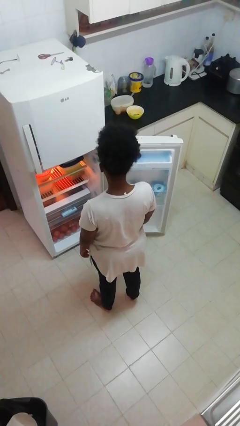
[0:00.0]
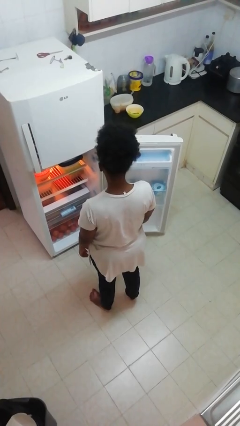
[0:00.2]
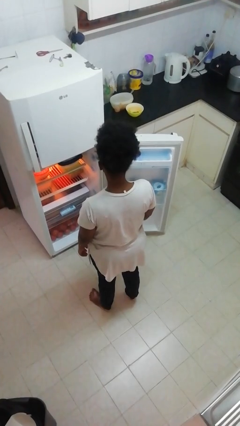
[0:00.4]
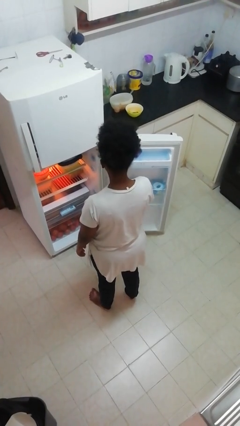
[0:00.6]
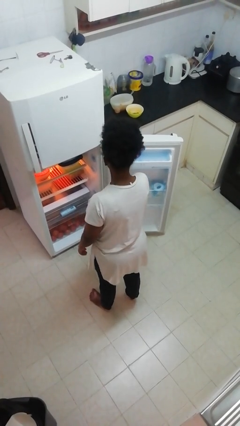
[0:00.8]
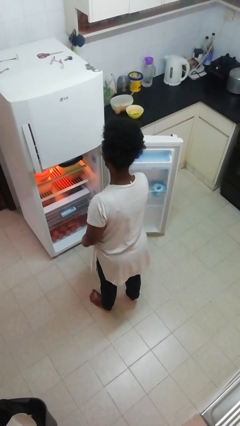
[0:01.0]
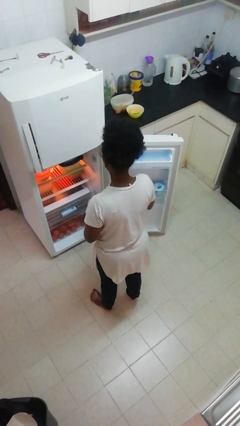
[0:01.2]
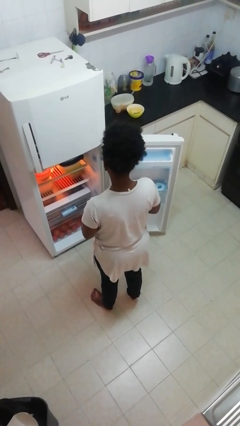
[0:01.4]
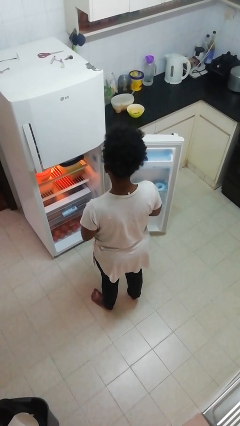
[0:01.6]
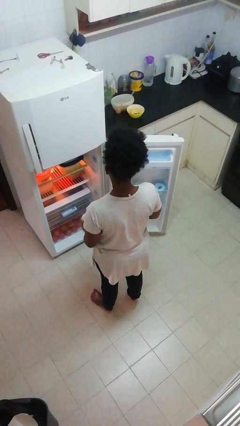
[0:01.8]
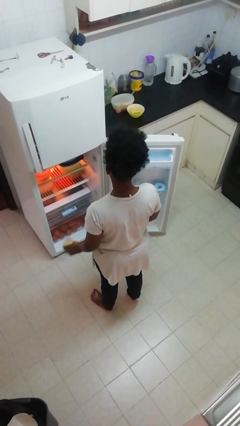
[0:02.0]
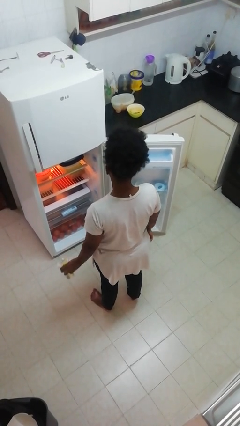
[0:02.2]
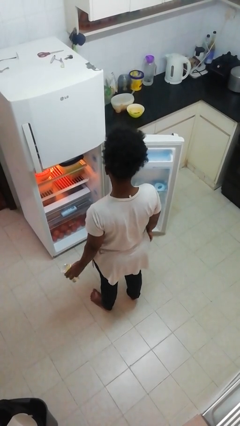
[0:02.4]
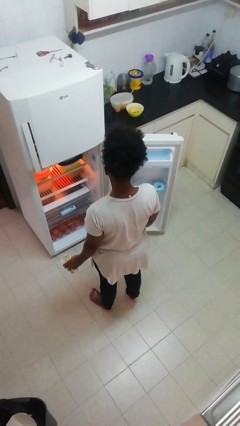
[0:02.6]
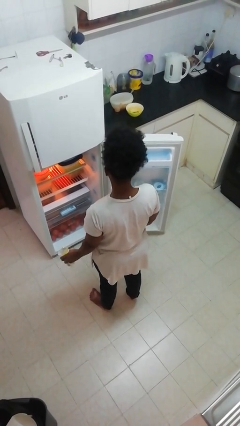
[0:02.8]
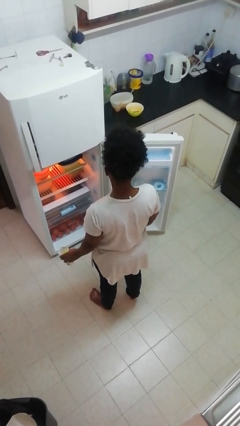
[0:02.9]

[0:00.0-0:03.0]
person takes object from refrigerator

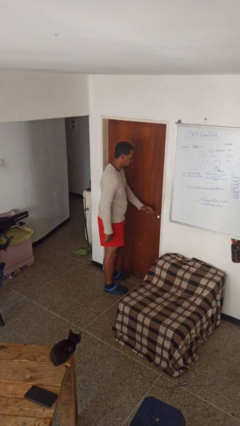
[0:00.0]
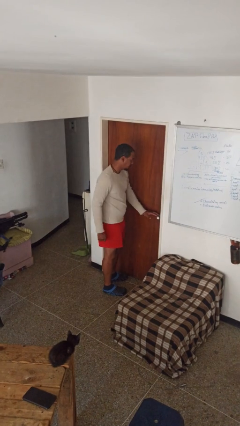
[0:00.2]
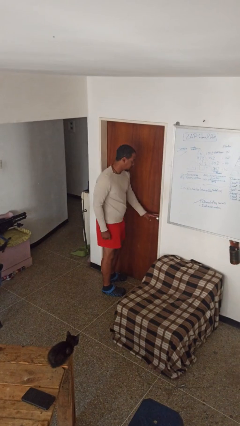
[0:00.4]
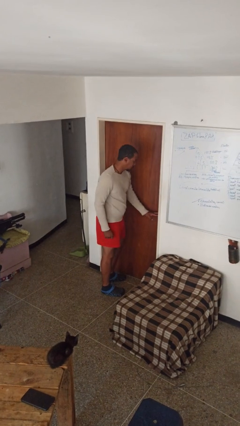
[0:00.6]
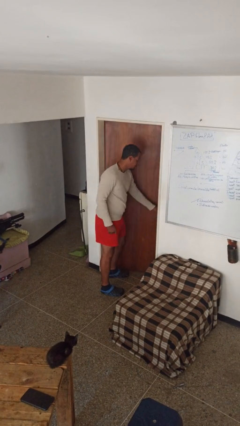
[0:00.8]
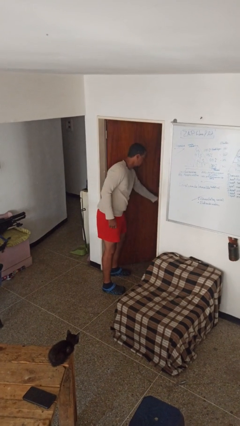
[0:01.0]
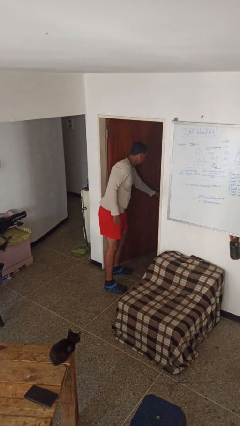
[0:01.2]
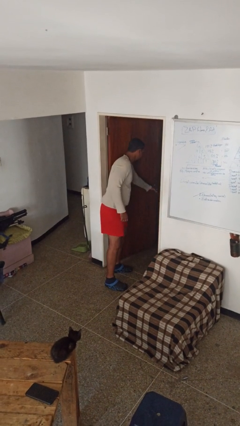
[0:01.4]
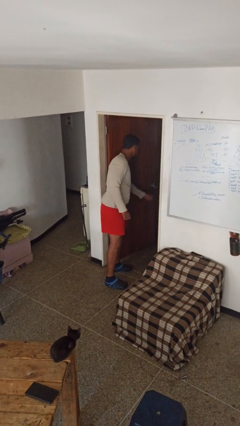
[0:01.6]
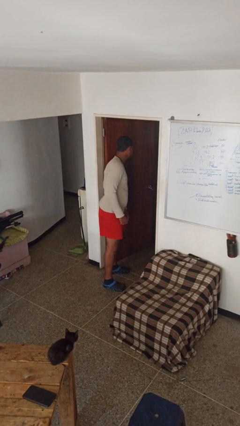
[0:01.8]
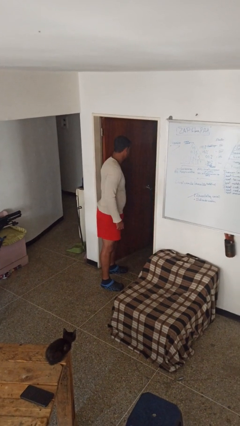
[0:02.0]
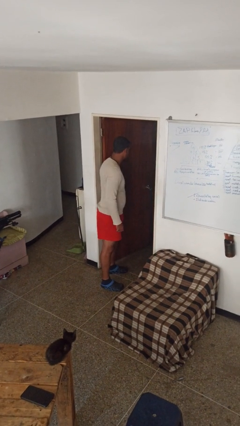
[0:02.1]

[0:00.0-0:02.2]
person opens facility door

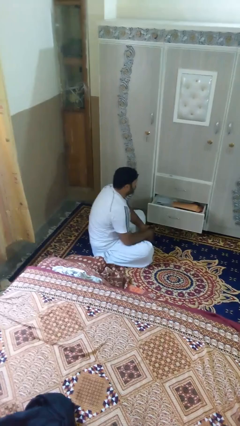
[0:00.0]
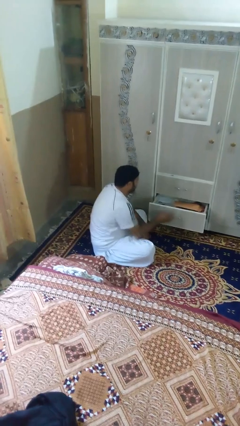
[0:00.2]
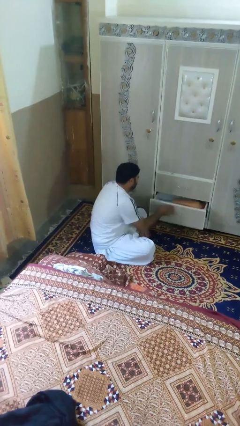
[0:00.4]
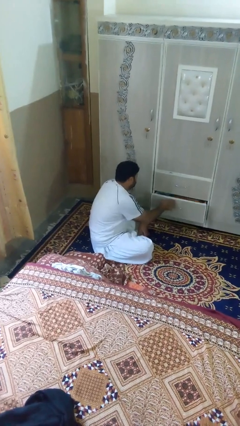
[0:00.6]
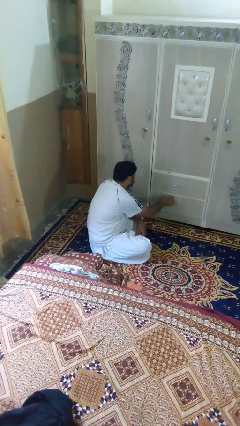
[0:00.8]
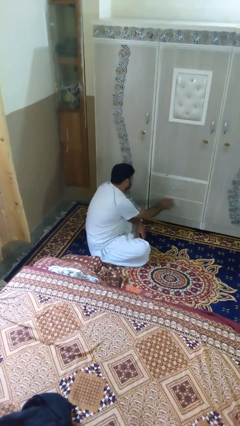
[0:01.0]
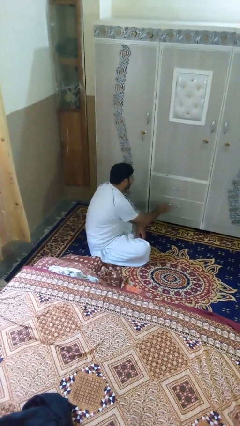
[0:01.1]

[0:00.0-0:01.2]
person closes dresser drawer

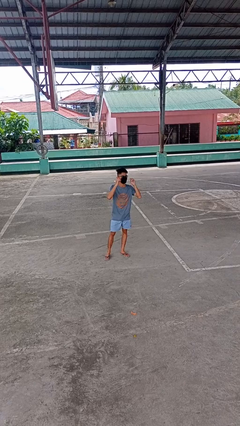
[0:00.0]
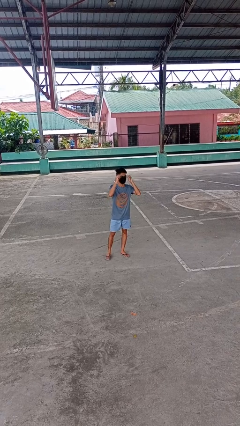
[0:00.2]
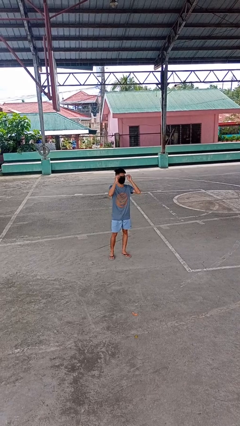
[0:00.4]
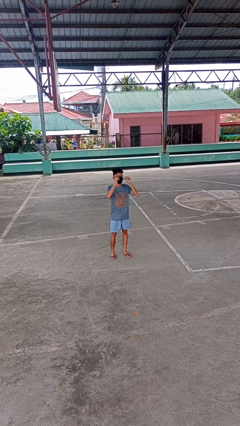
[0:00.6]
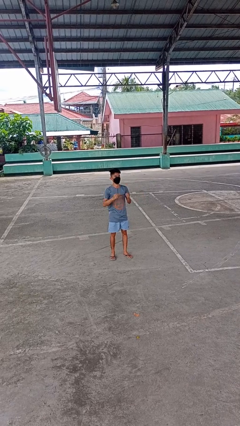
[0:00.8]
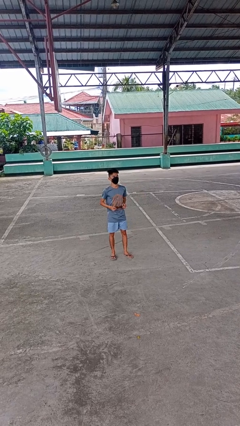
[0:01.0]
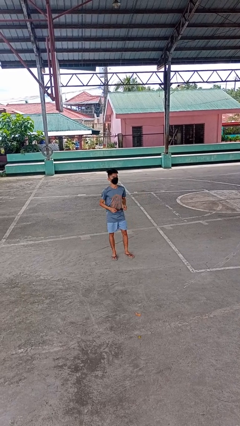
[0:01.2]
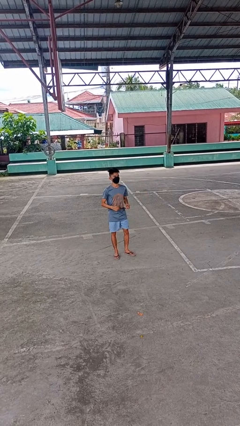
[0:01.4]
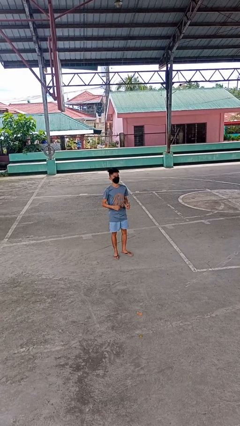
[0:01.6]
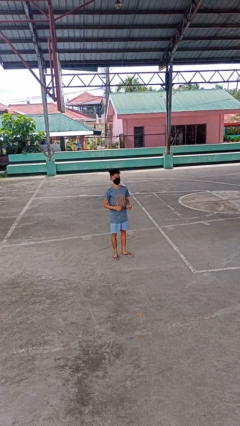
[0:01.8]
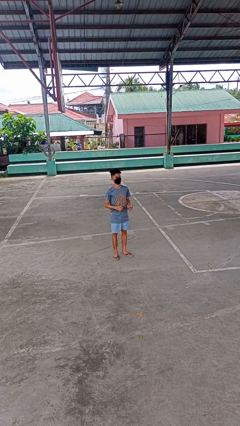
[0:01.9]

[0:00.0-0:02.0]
person takes off glasses

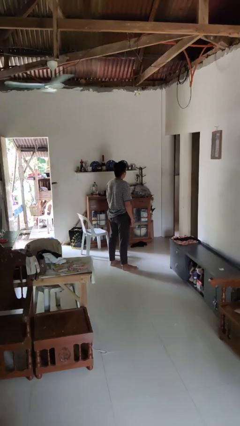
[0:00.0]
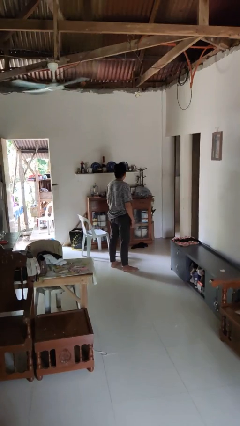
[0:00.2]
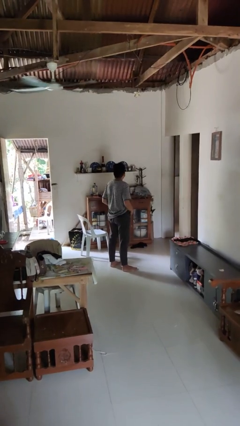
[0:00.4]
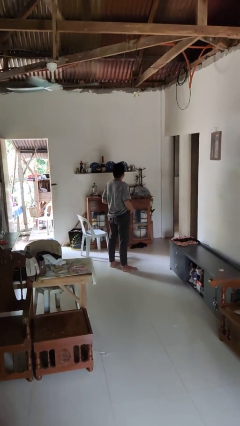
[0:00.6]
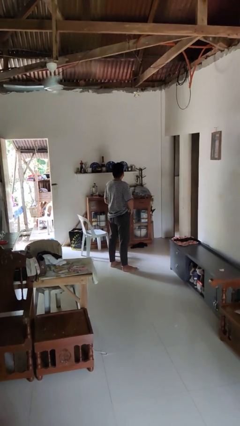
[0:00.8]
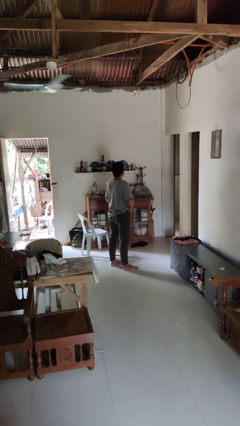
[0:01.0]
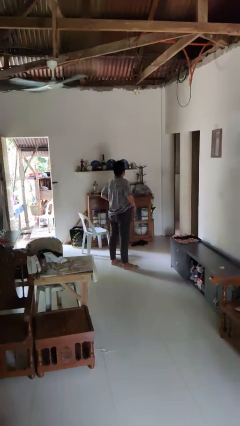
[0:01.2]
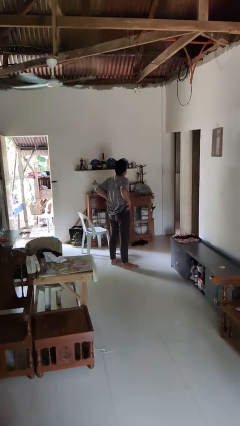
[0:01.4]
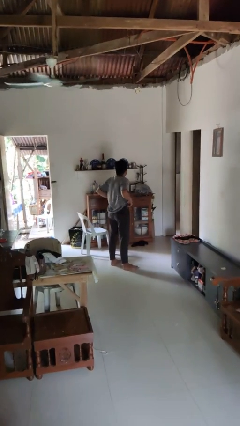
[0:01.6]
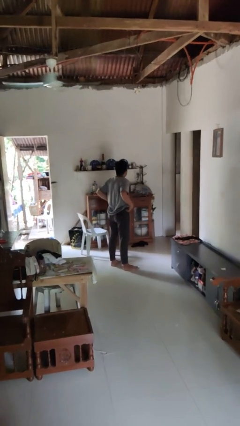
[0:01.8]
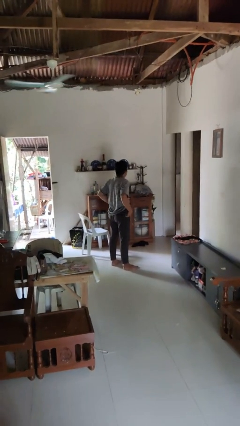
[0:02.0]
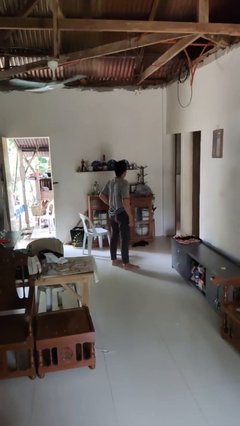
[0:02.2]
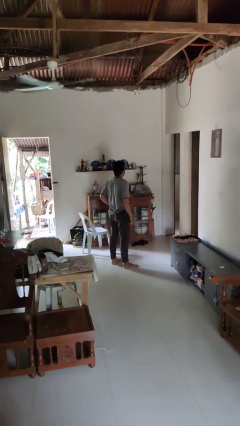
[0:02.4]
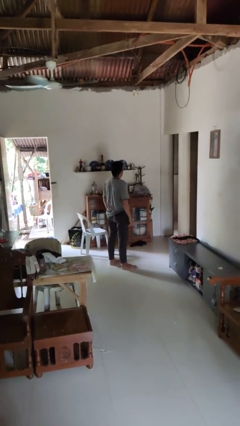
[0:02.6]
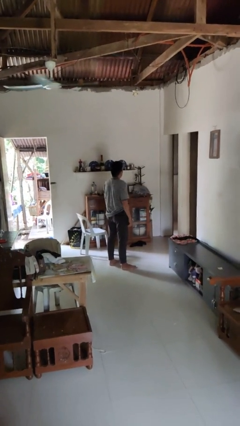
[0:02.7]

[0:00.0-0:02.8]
person hikes up pants

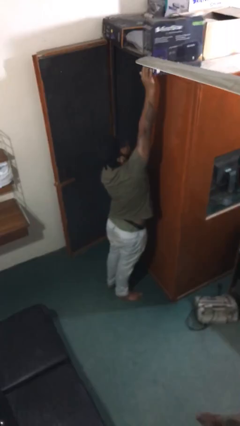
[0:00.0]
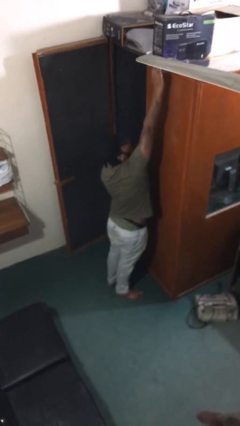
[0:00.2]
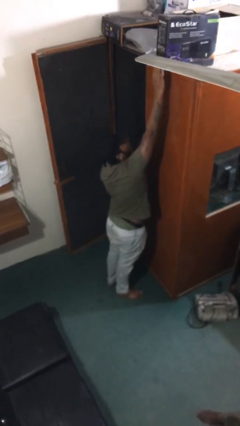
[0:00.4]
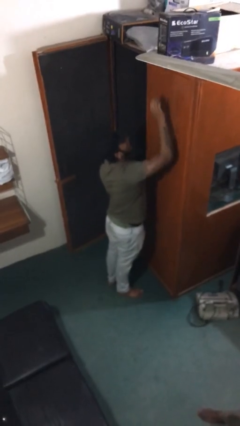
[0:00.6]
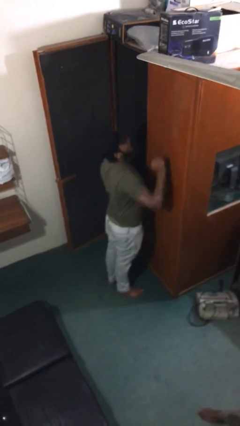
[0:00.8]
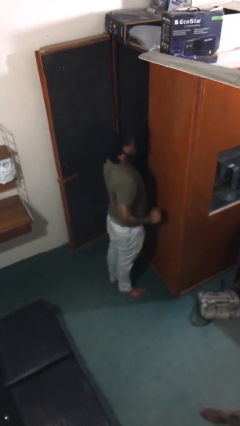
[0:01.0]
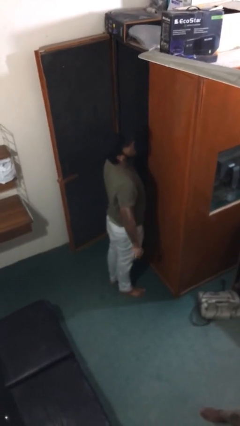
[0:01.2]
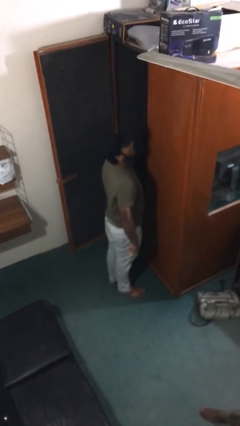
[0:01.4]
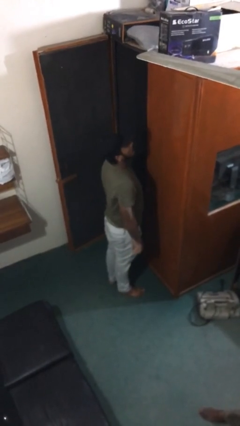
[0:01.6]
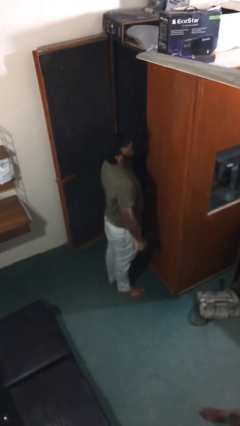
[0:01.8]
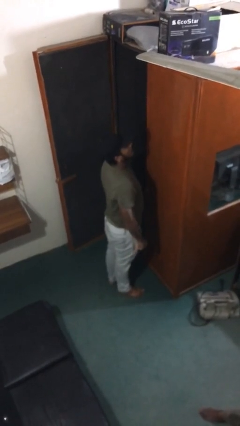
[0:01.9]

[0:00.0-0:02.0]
person puts down object on shelf

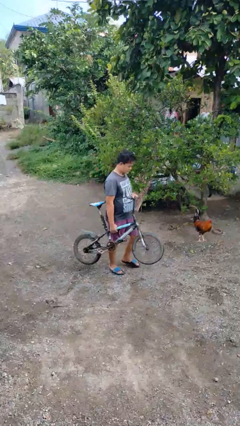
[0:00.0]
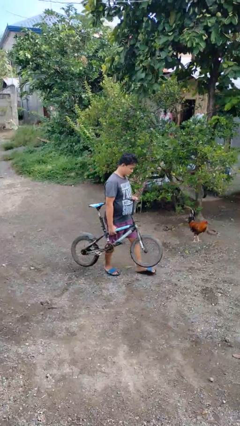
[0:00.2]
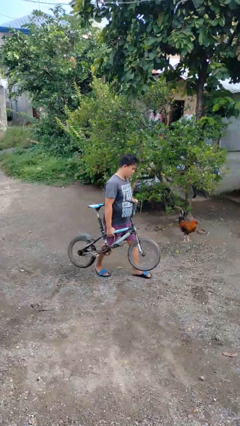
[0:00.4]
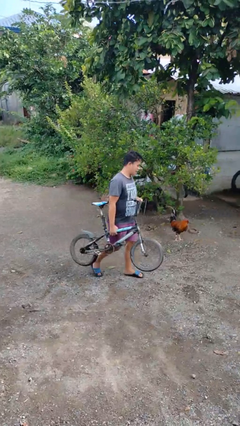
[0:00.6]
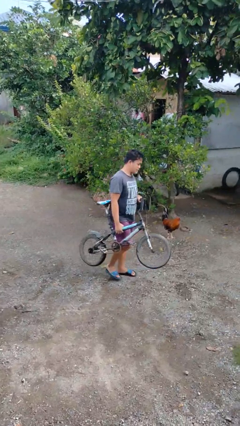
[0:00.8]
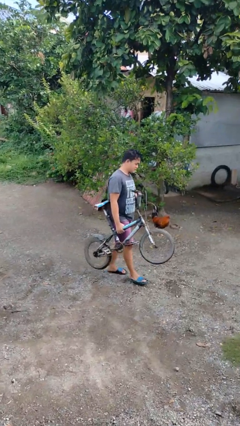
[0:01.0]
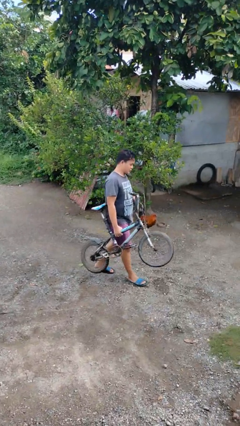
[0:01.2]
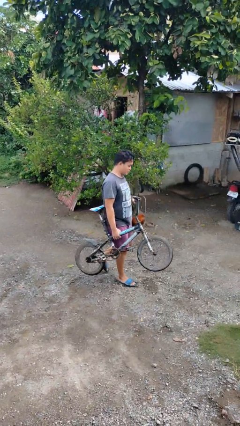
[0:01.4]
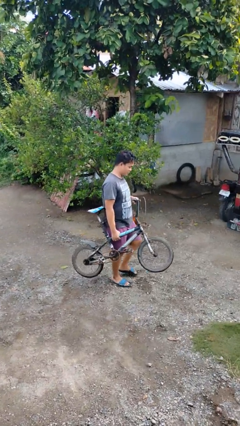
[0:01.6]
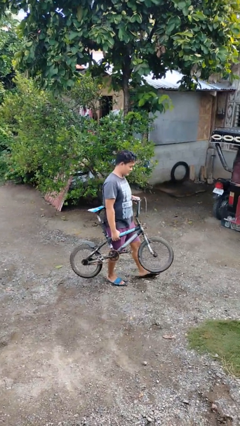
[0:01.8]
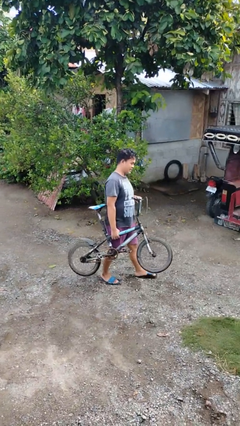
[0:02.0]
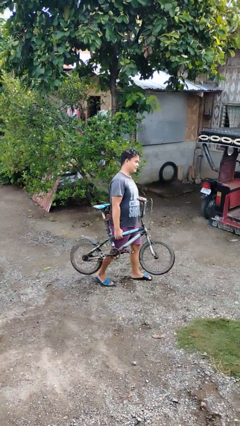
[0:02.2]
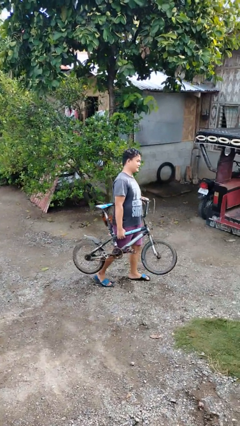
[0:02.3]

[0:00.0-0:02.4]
person carries bicycle

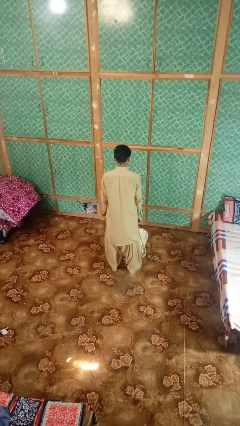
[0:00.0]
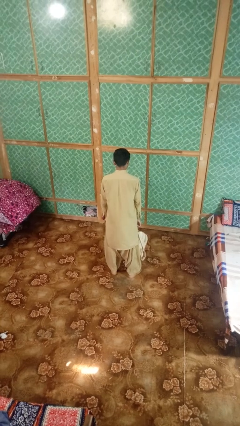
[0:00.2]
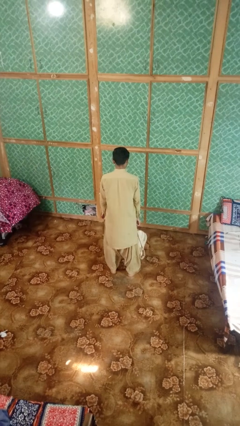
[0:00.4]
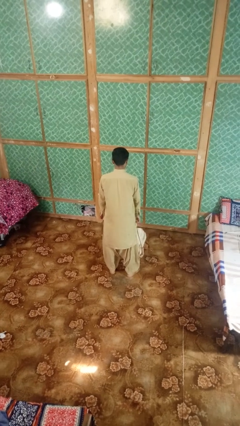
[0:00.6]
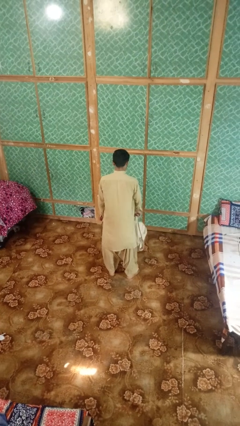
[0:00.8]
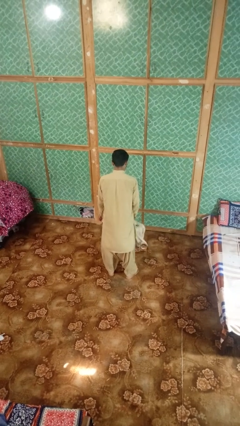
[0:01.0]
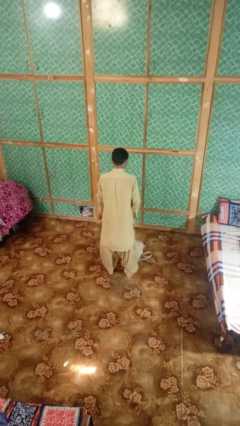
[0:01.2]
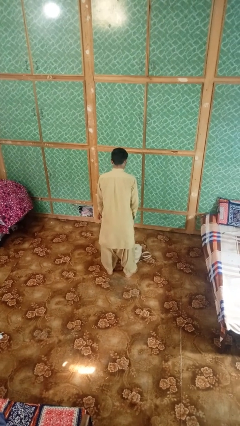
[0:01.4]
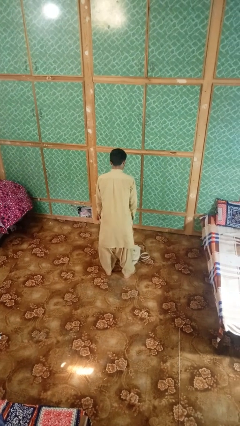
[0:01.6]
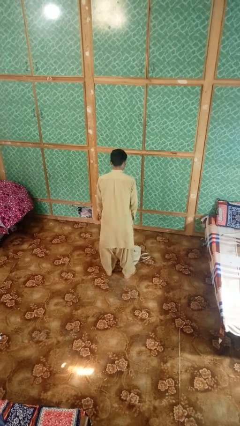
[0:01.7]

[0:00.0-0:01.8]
person throws object to ground
